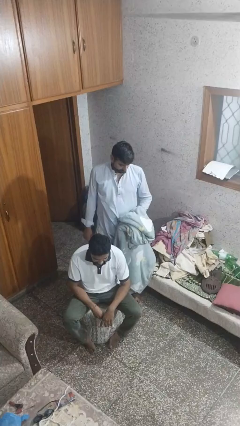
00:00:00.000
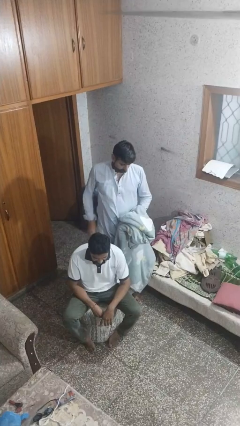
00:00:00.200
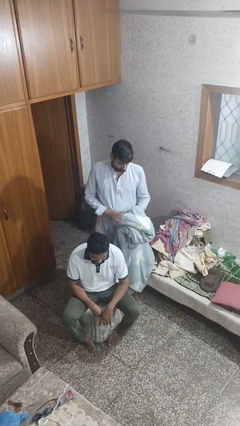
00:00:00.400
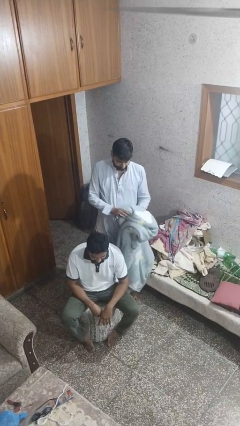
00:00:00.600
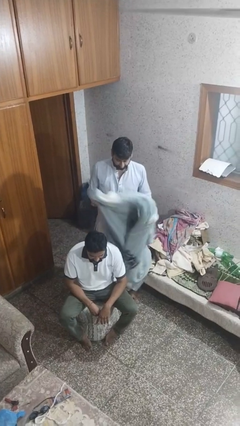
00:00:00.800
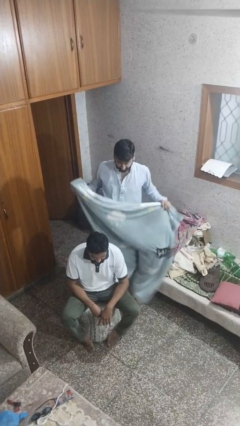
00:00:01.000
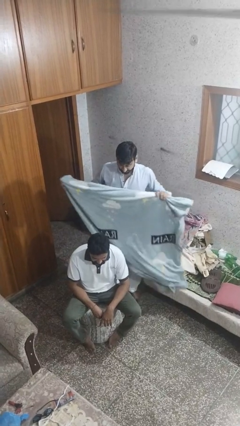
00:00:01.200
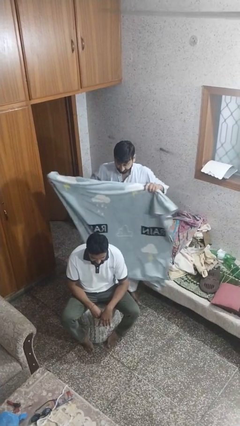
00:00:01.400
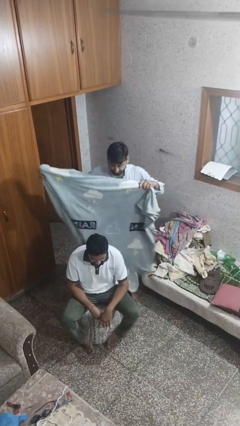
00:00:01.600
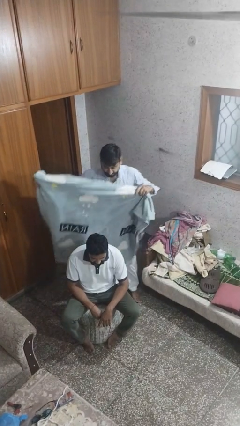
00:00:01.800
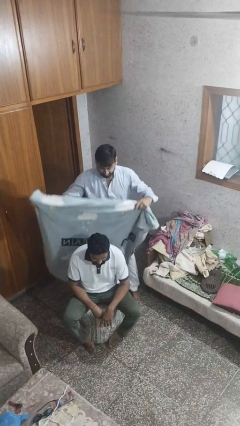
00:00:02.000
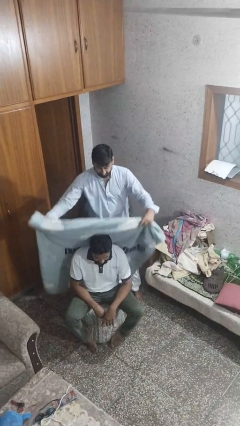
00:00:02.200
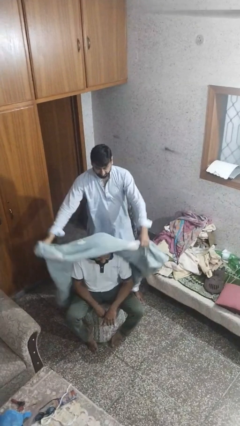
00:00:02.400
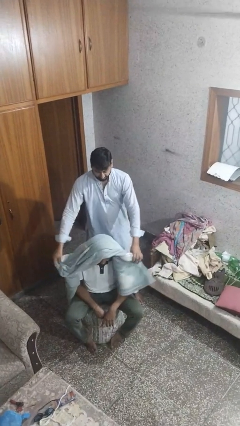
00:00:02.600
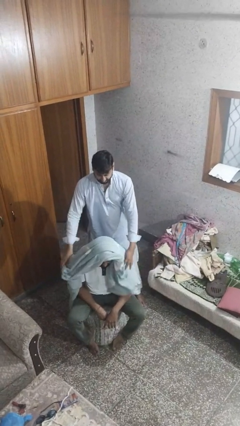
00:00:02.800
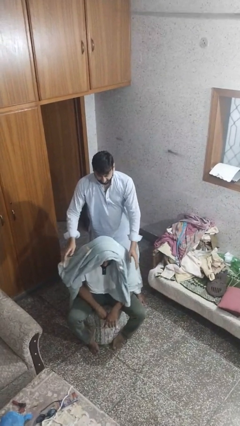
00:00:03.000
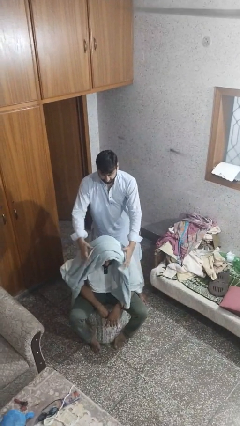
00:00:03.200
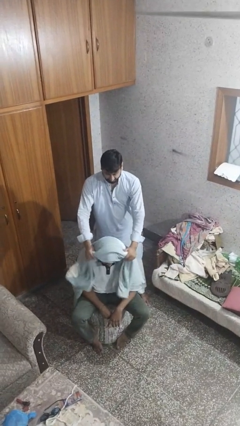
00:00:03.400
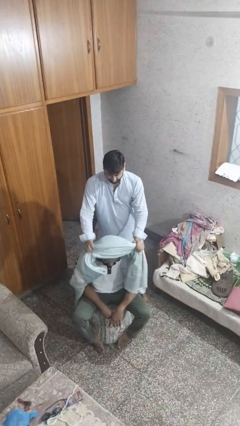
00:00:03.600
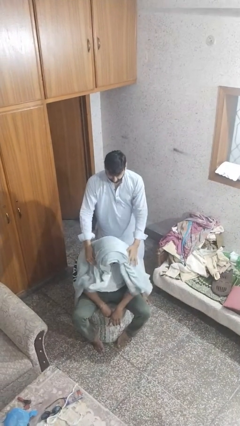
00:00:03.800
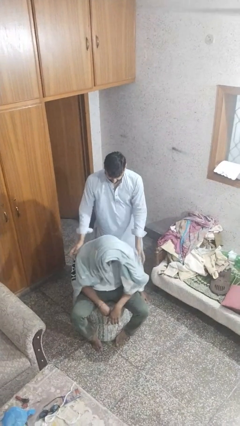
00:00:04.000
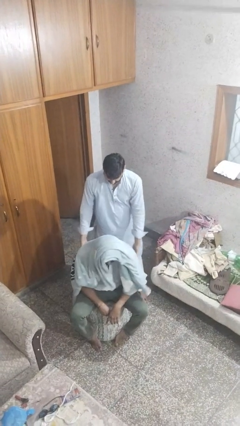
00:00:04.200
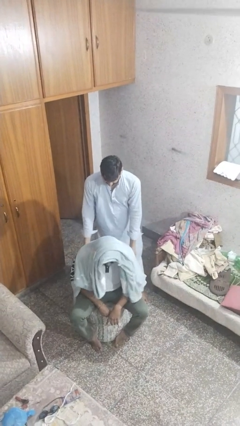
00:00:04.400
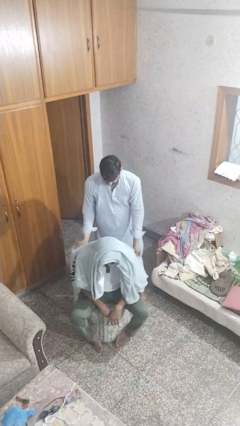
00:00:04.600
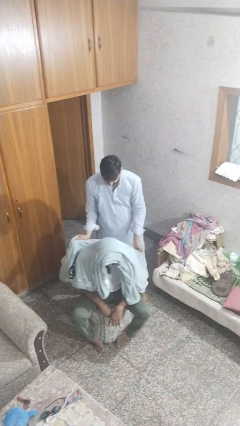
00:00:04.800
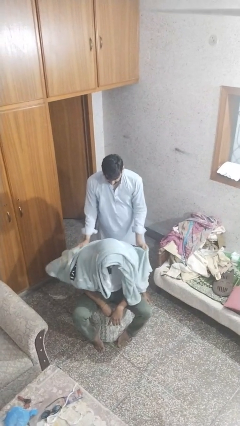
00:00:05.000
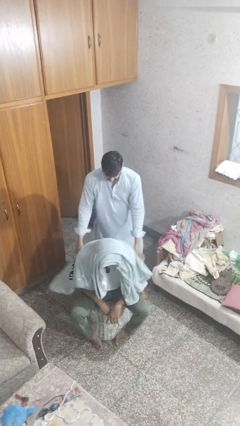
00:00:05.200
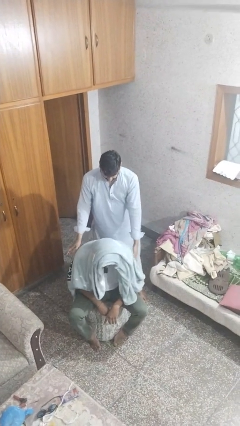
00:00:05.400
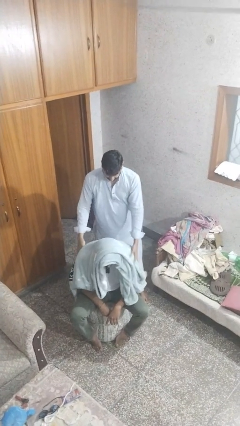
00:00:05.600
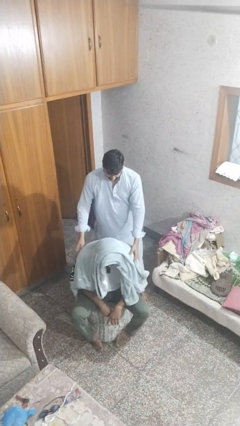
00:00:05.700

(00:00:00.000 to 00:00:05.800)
person covers friend with blanket

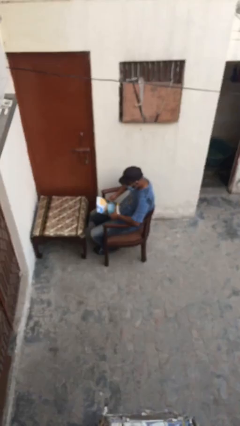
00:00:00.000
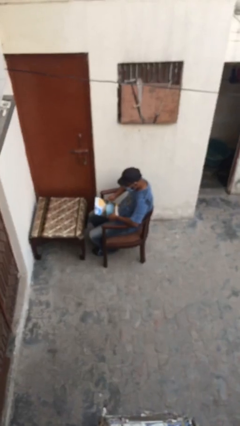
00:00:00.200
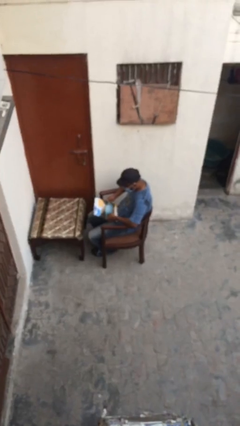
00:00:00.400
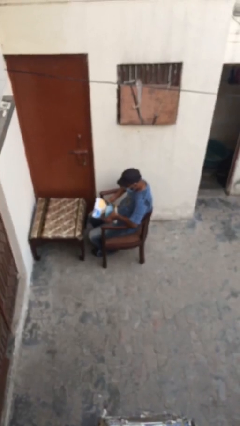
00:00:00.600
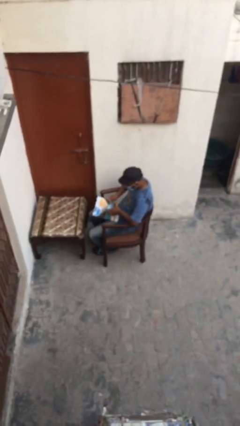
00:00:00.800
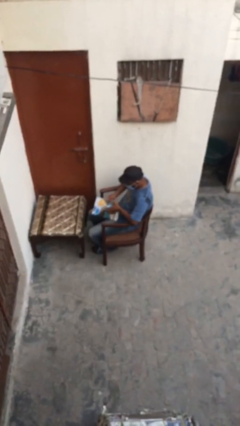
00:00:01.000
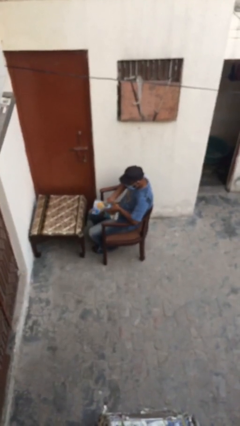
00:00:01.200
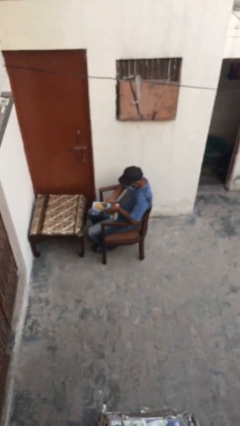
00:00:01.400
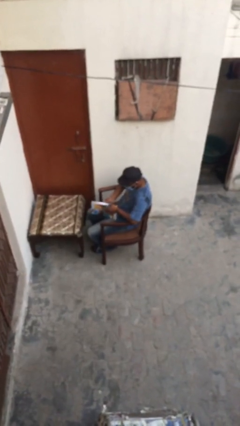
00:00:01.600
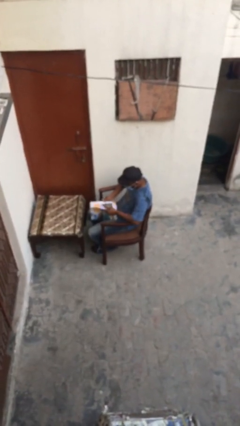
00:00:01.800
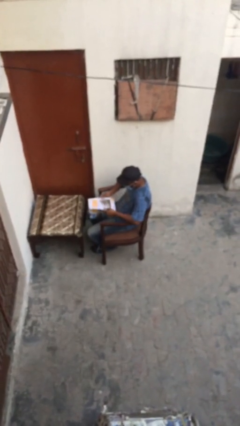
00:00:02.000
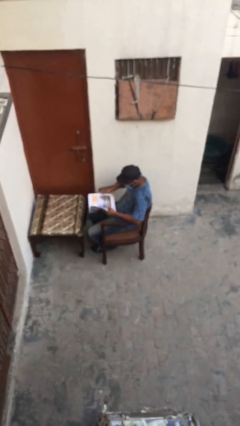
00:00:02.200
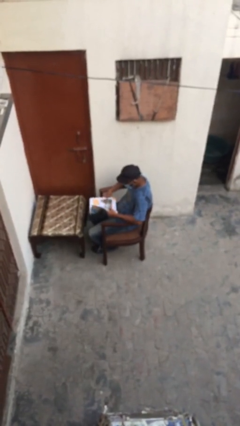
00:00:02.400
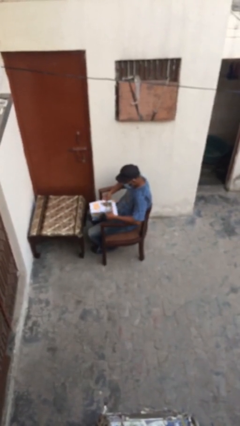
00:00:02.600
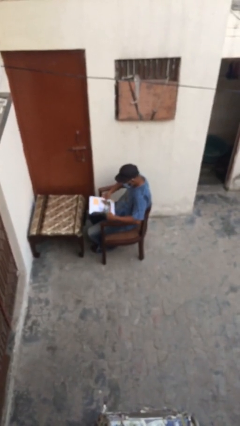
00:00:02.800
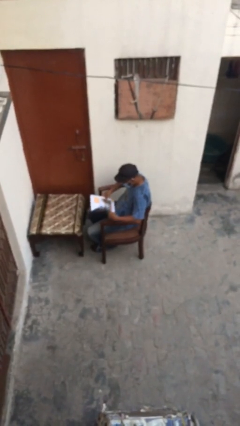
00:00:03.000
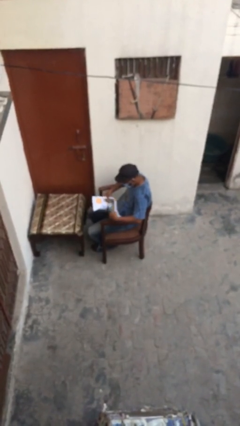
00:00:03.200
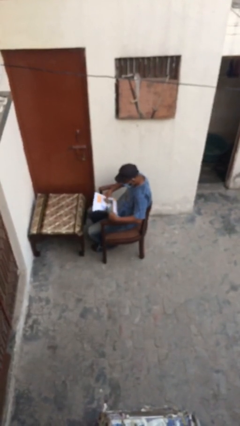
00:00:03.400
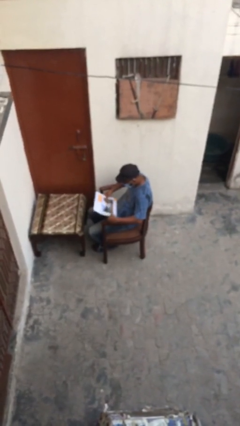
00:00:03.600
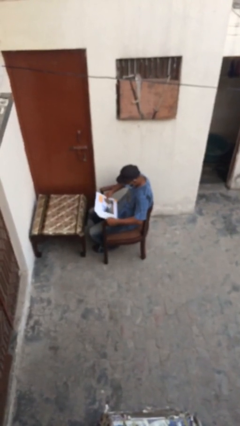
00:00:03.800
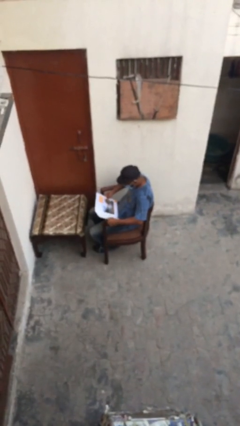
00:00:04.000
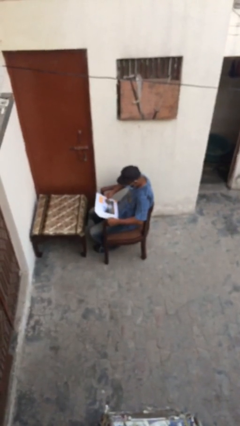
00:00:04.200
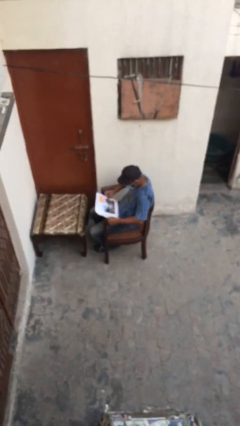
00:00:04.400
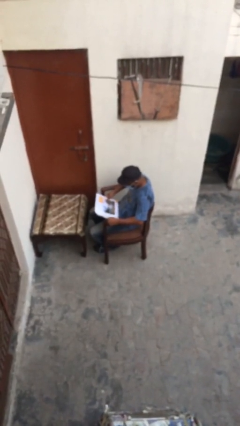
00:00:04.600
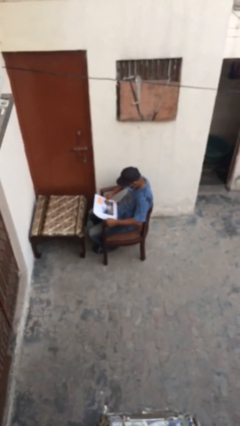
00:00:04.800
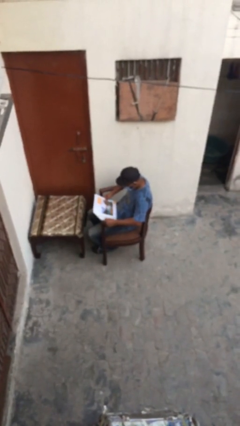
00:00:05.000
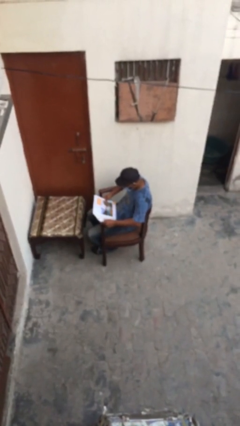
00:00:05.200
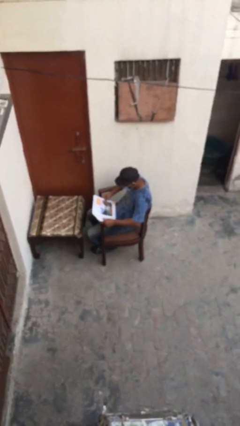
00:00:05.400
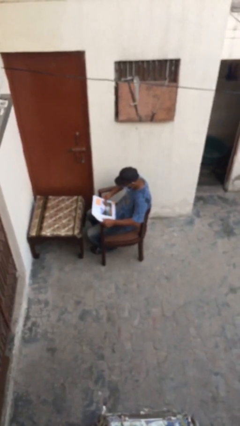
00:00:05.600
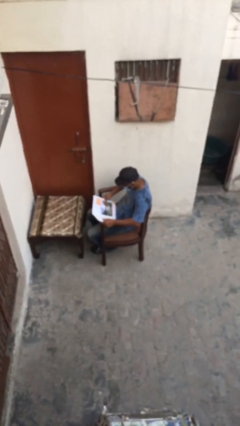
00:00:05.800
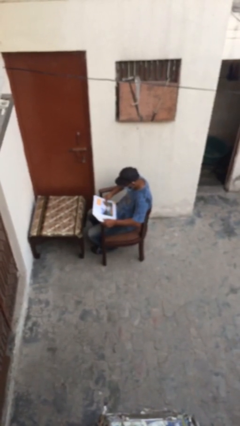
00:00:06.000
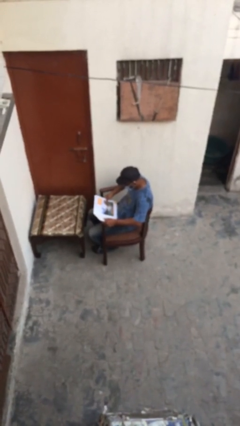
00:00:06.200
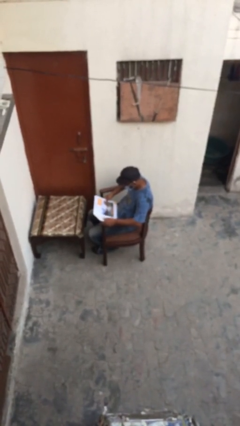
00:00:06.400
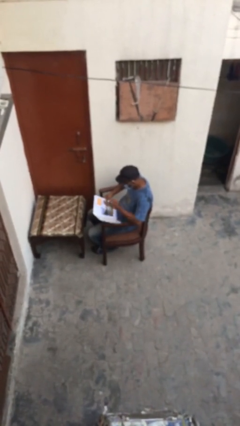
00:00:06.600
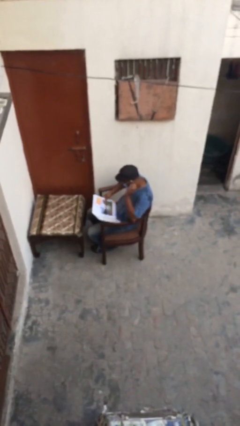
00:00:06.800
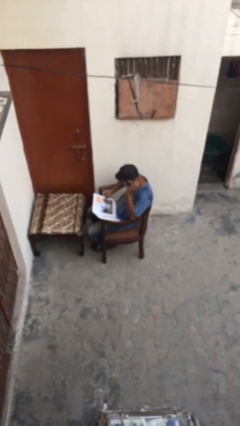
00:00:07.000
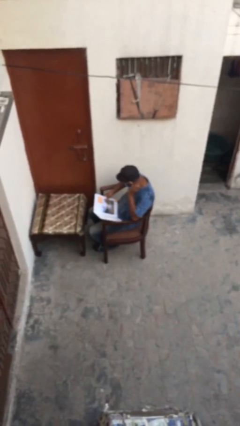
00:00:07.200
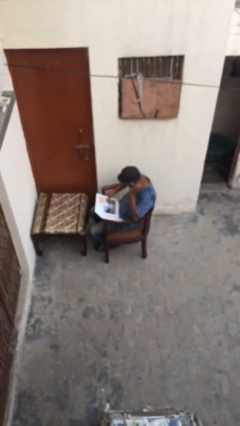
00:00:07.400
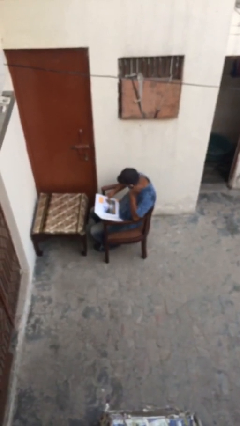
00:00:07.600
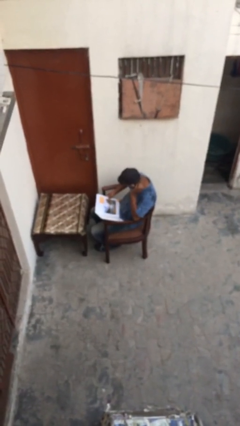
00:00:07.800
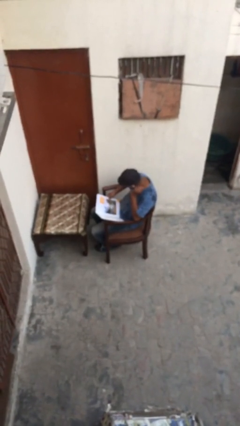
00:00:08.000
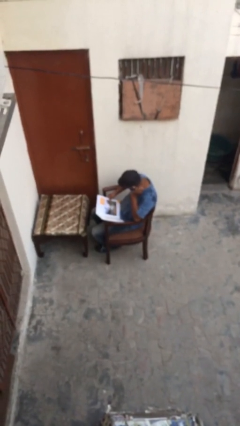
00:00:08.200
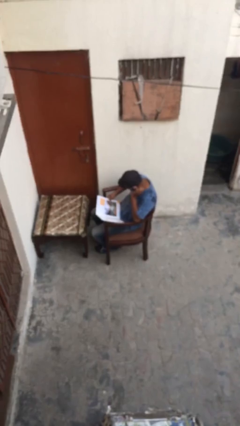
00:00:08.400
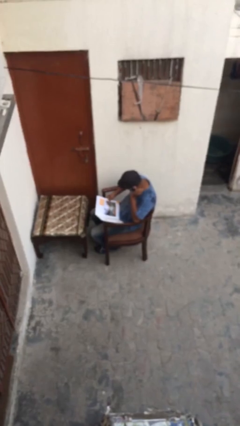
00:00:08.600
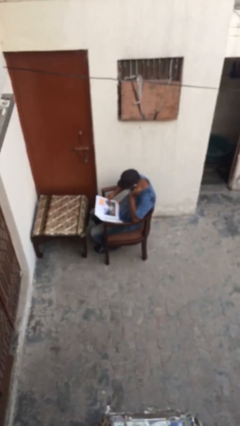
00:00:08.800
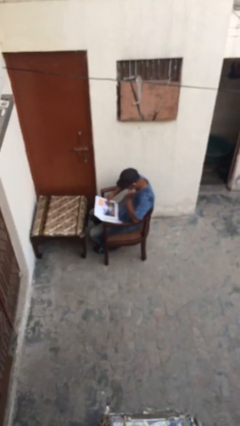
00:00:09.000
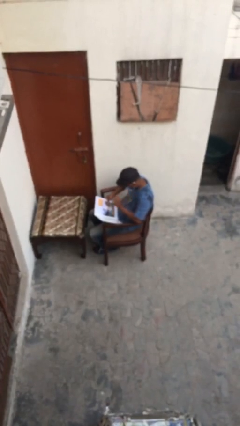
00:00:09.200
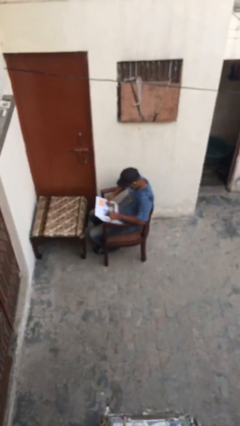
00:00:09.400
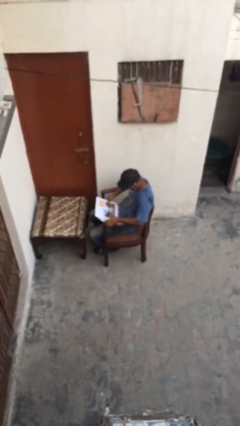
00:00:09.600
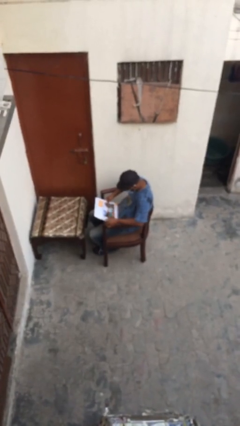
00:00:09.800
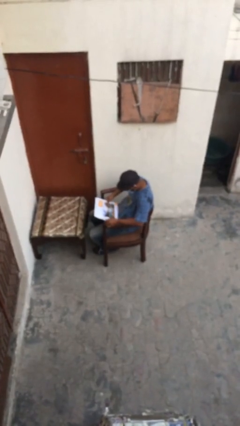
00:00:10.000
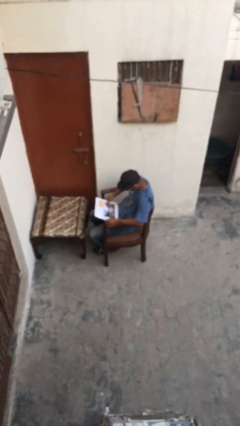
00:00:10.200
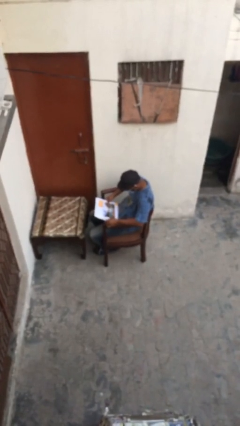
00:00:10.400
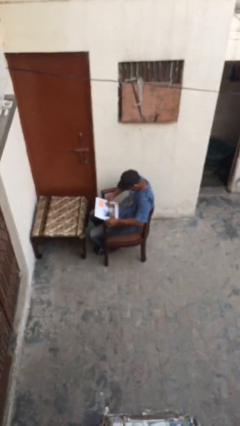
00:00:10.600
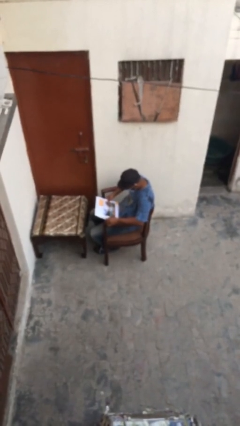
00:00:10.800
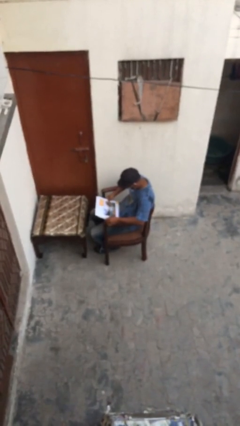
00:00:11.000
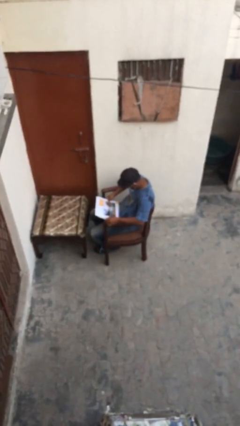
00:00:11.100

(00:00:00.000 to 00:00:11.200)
person reads document

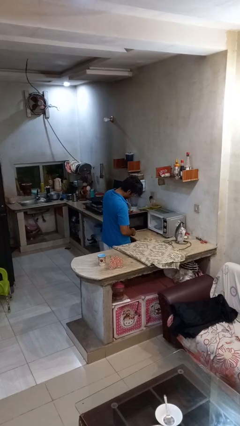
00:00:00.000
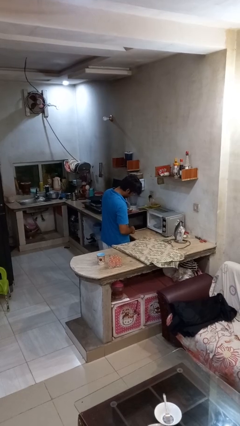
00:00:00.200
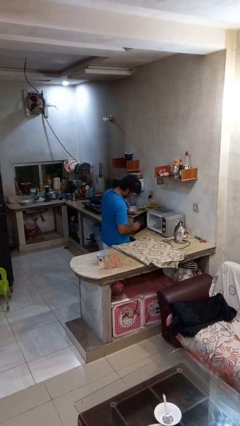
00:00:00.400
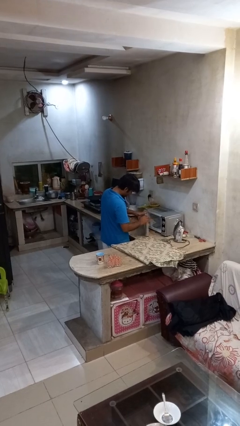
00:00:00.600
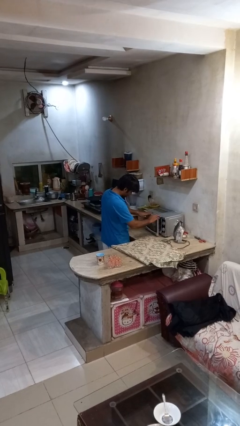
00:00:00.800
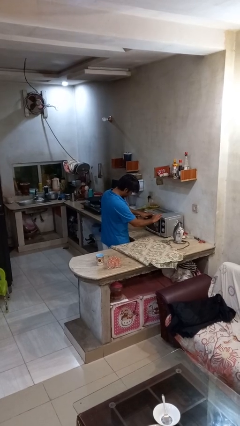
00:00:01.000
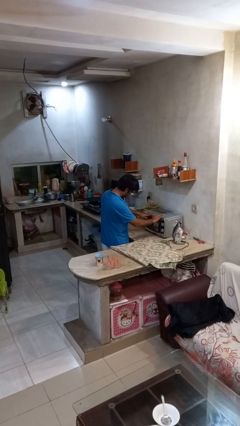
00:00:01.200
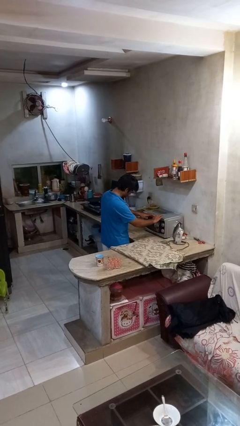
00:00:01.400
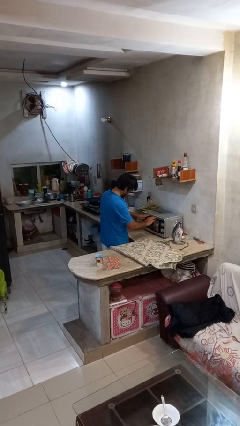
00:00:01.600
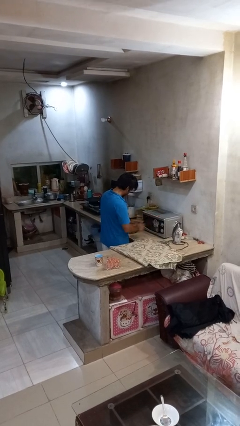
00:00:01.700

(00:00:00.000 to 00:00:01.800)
person closes microwave
